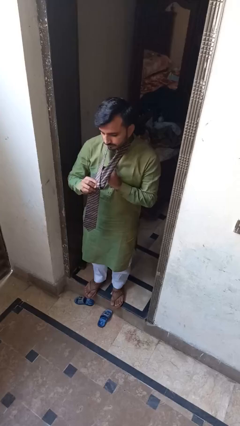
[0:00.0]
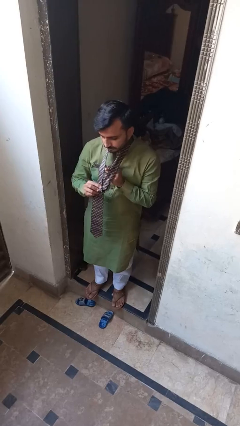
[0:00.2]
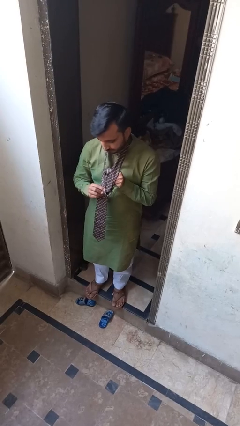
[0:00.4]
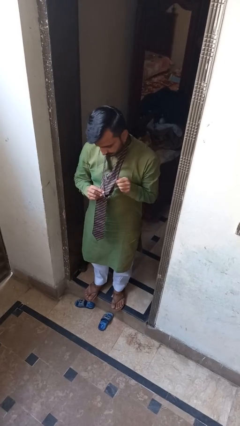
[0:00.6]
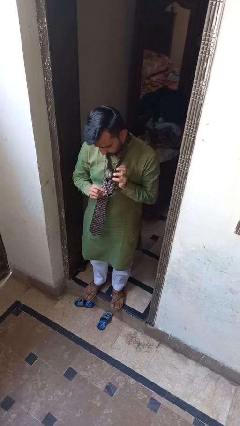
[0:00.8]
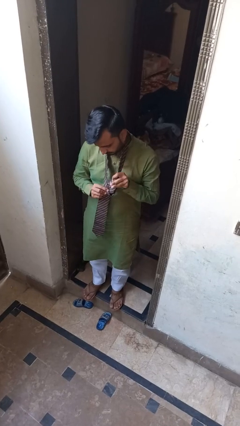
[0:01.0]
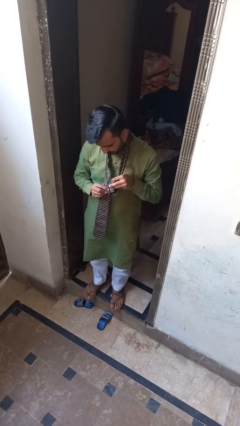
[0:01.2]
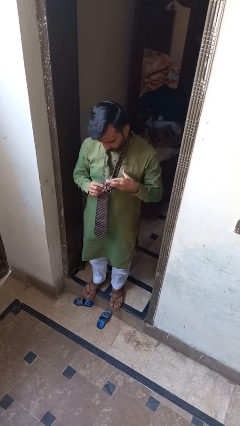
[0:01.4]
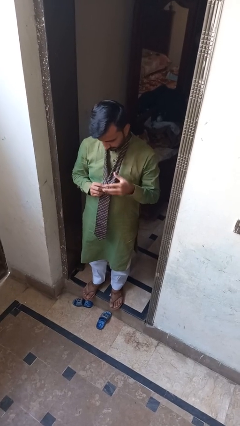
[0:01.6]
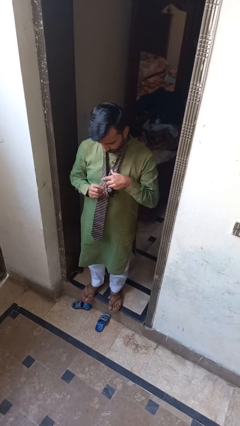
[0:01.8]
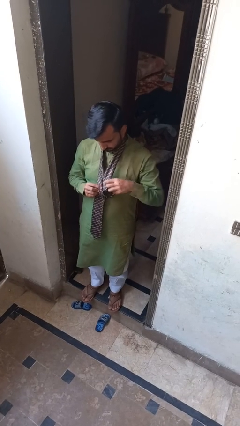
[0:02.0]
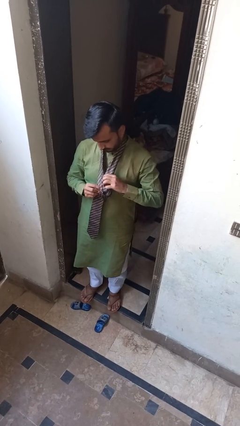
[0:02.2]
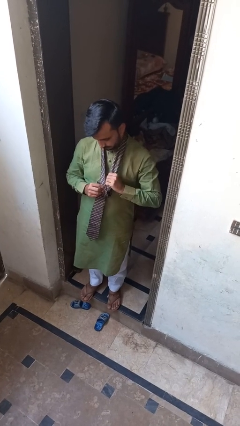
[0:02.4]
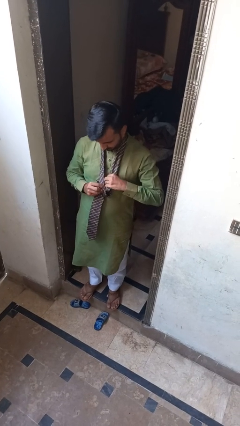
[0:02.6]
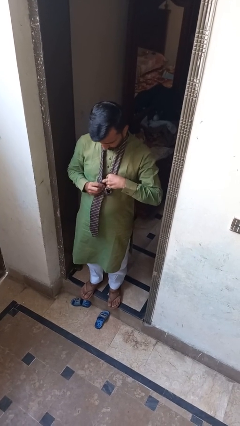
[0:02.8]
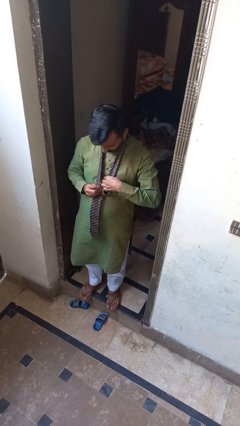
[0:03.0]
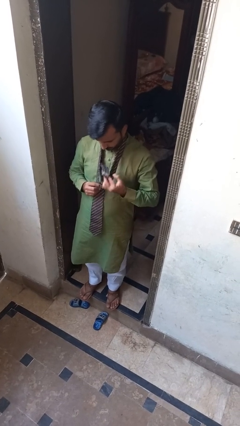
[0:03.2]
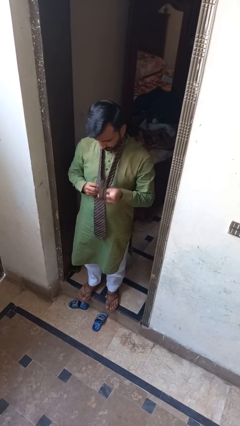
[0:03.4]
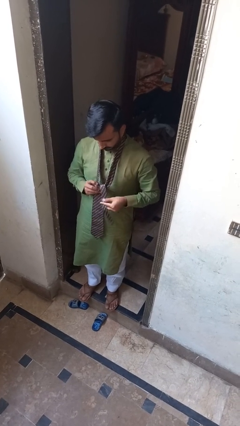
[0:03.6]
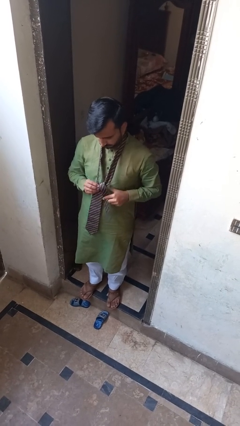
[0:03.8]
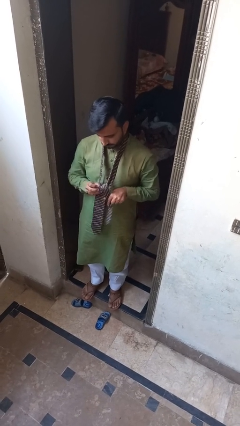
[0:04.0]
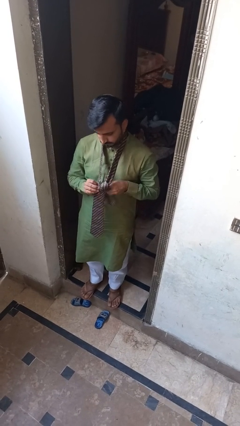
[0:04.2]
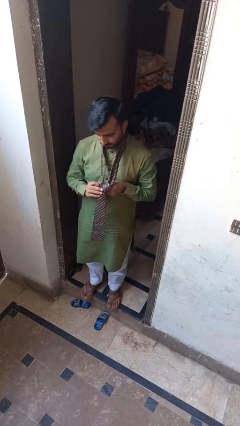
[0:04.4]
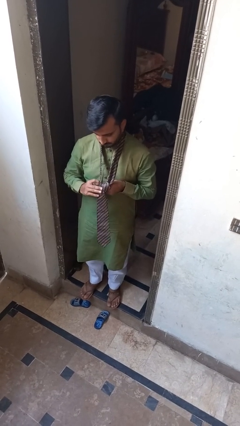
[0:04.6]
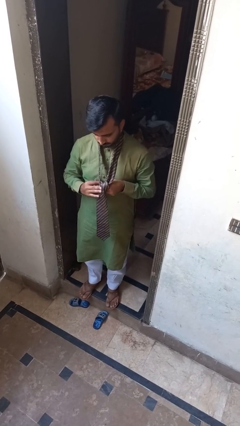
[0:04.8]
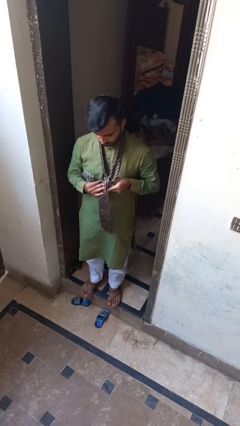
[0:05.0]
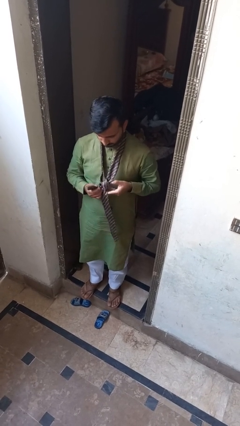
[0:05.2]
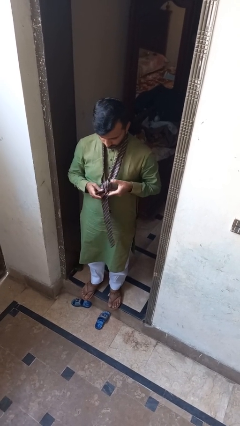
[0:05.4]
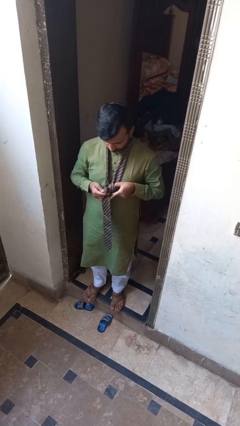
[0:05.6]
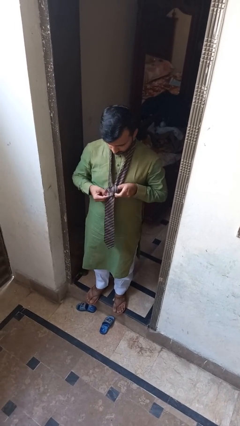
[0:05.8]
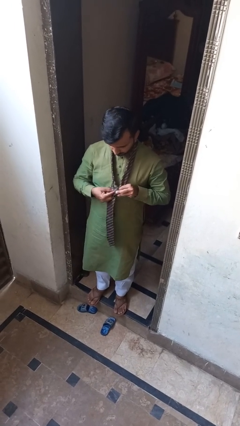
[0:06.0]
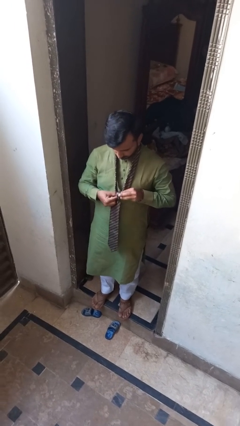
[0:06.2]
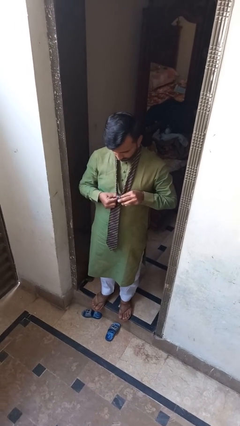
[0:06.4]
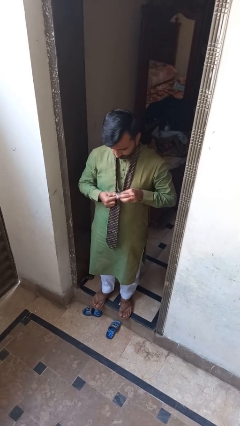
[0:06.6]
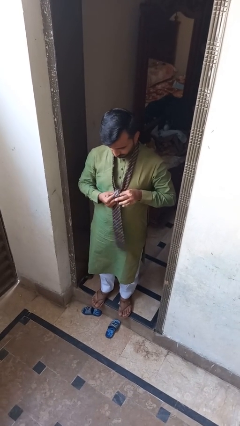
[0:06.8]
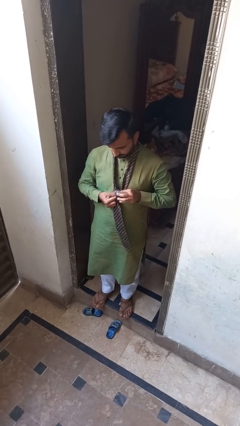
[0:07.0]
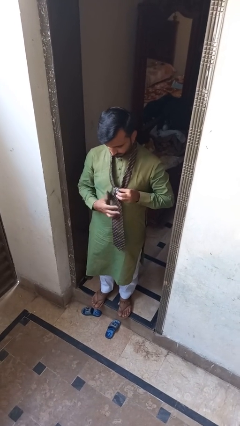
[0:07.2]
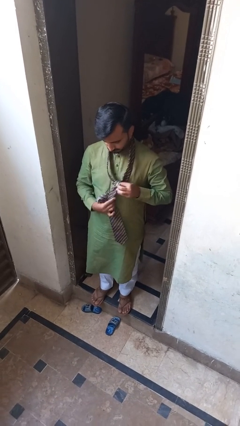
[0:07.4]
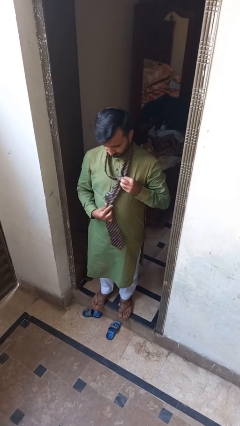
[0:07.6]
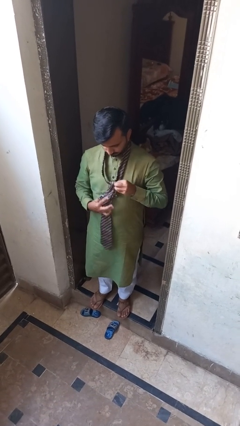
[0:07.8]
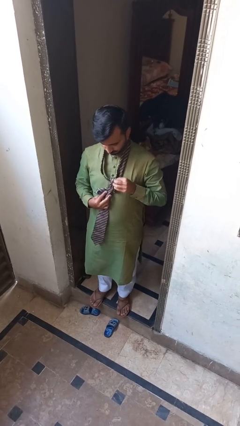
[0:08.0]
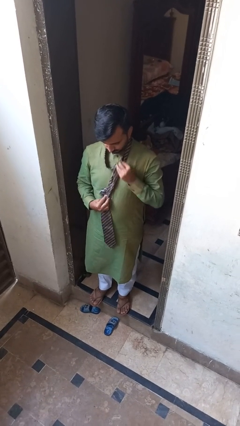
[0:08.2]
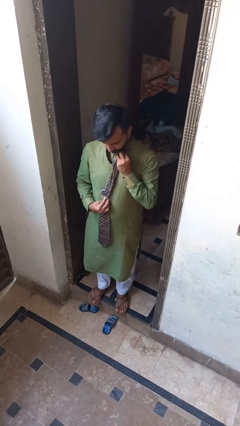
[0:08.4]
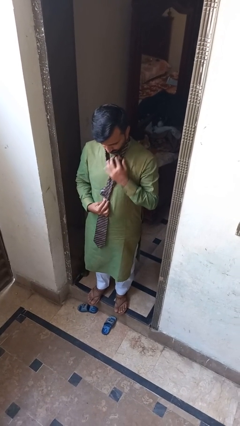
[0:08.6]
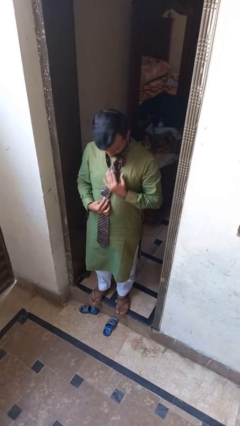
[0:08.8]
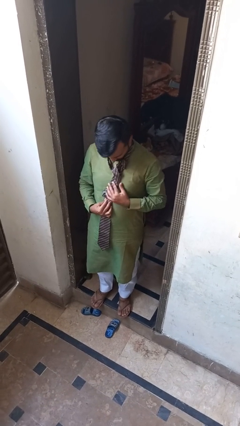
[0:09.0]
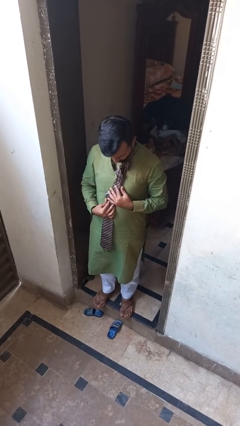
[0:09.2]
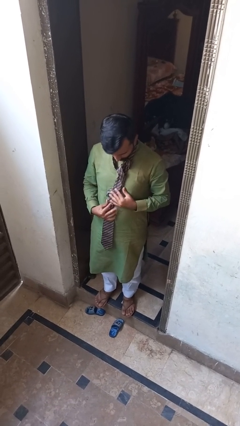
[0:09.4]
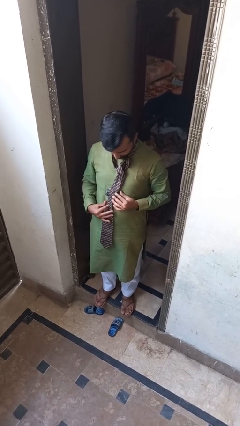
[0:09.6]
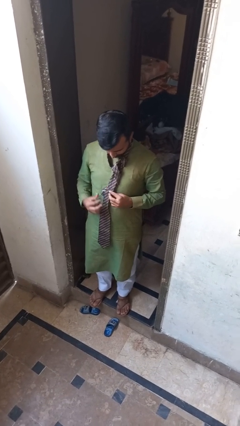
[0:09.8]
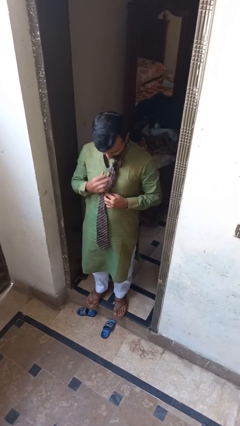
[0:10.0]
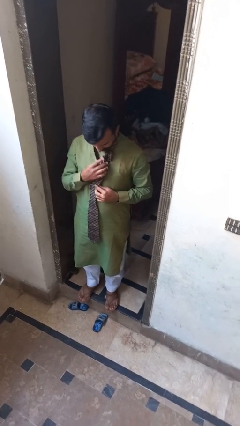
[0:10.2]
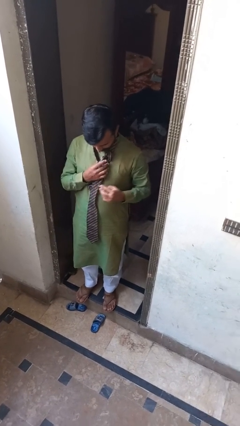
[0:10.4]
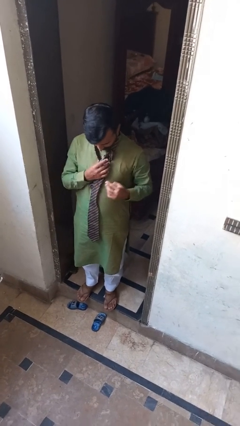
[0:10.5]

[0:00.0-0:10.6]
person puts on necktie

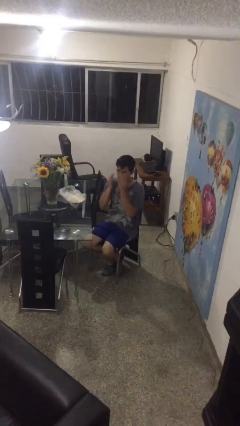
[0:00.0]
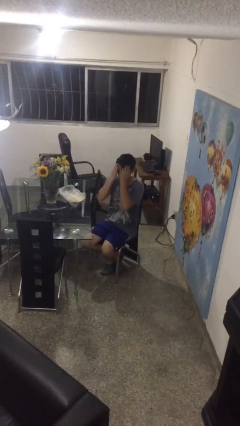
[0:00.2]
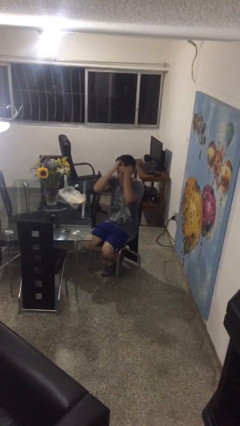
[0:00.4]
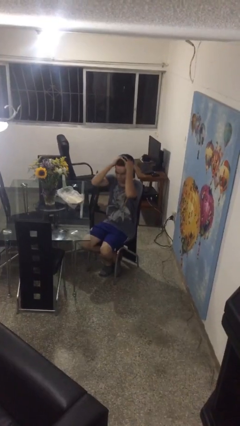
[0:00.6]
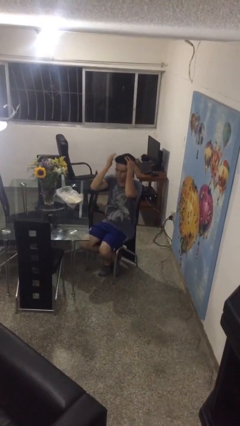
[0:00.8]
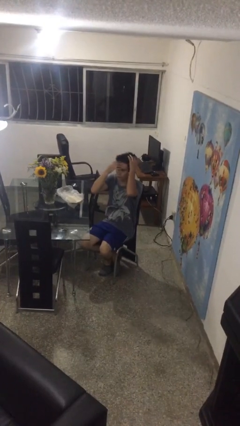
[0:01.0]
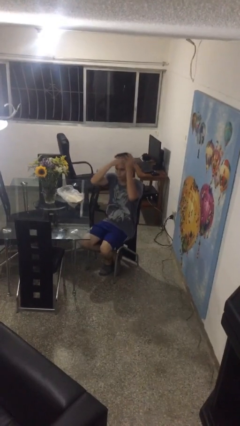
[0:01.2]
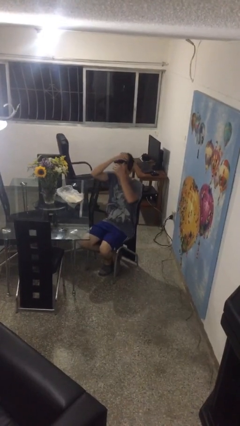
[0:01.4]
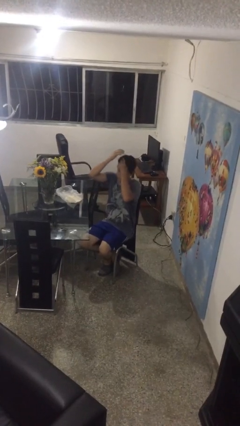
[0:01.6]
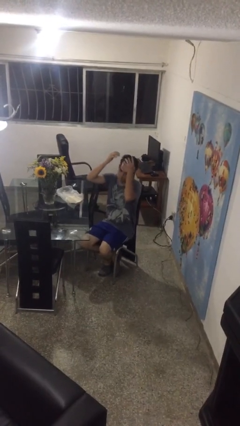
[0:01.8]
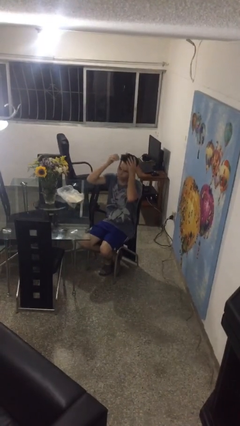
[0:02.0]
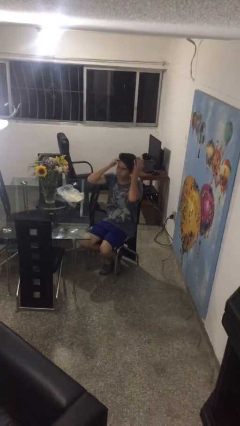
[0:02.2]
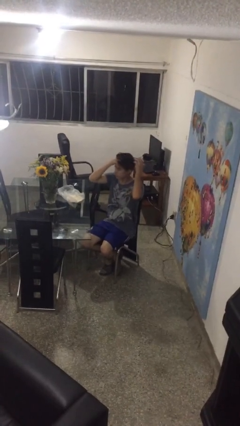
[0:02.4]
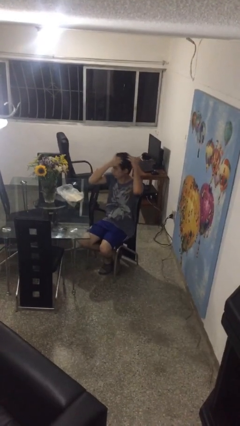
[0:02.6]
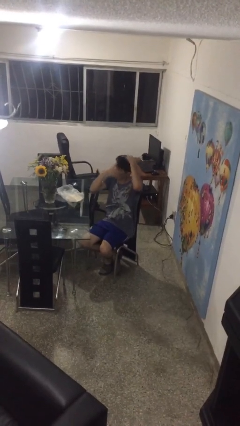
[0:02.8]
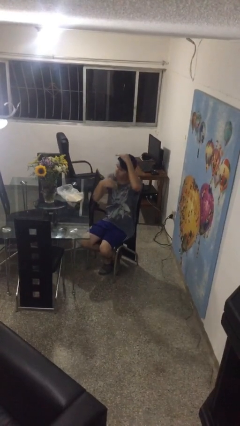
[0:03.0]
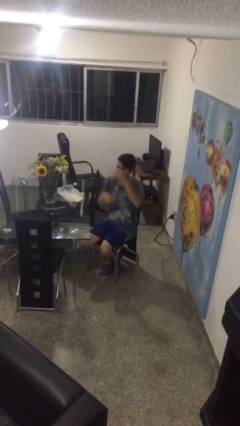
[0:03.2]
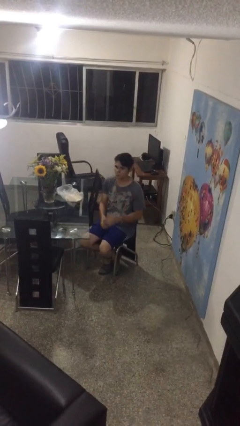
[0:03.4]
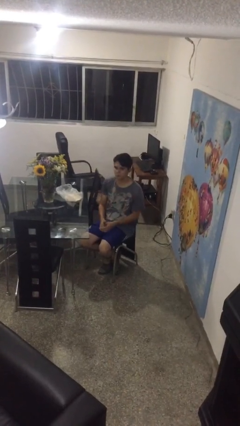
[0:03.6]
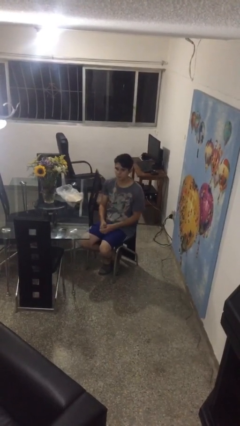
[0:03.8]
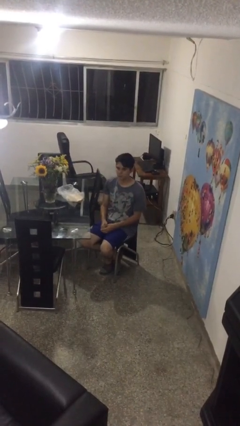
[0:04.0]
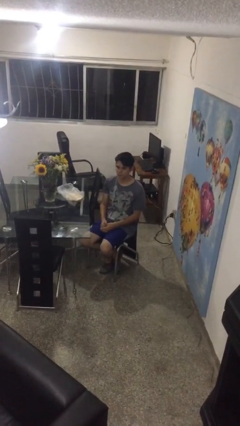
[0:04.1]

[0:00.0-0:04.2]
person strokes hair

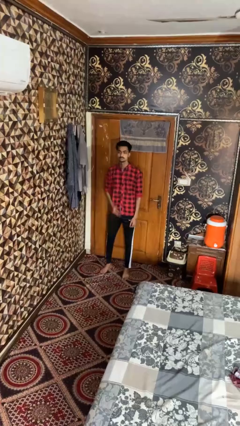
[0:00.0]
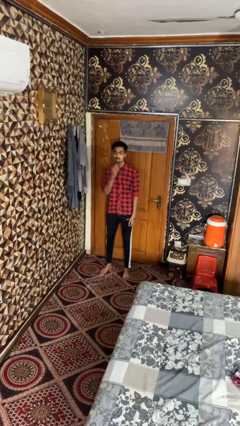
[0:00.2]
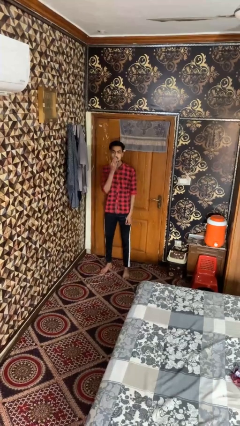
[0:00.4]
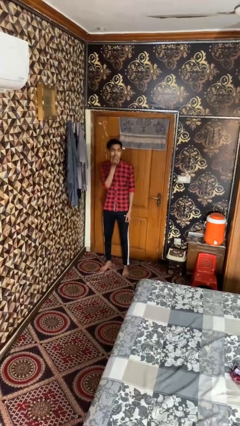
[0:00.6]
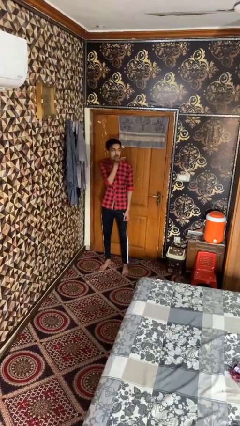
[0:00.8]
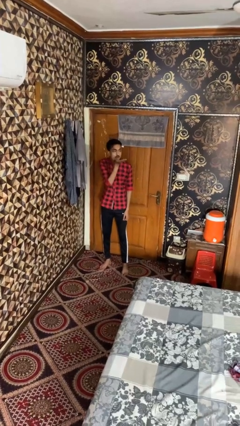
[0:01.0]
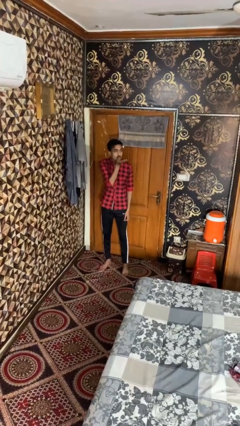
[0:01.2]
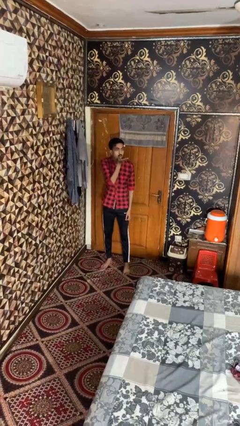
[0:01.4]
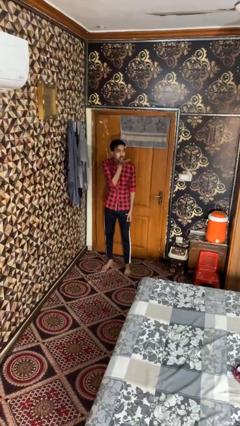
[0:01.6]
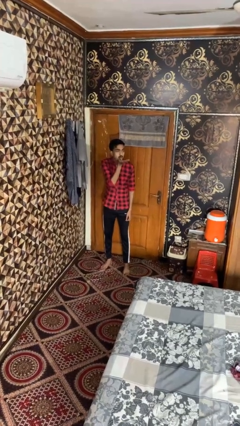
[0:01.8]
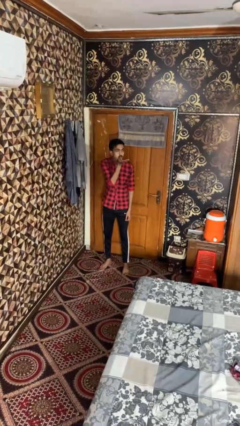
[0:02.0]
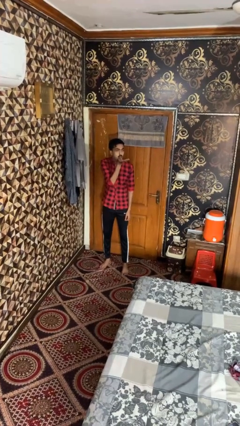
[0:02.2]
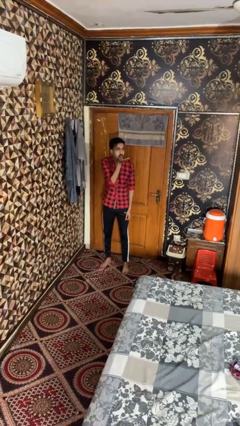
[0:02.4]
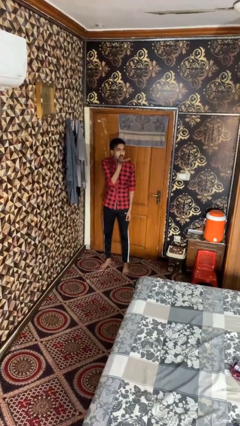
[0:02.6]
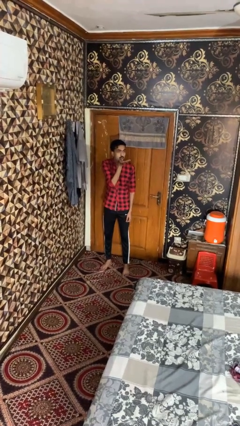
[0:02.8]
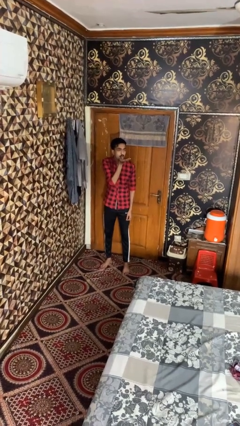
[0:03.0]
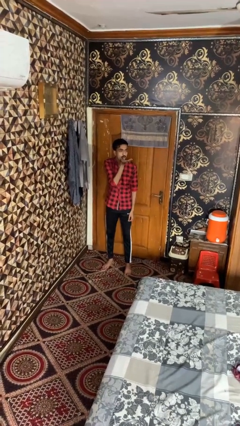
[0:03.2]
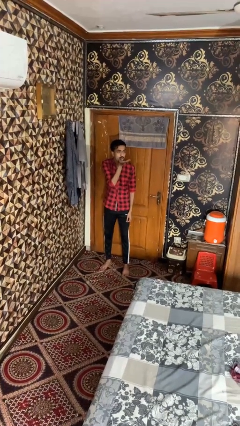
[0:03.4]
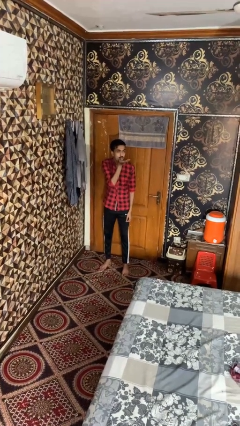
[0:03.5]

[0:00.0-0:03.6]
person gestures blow kiss
